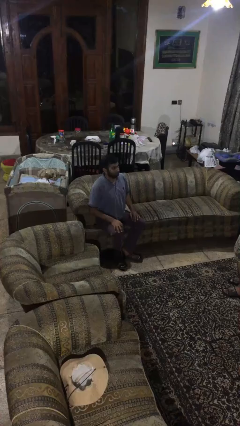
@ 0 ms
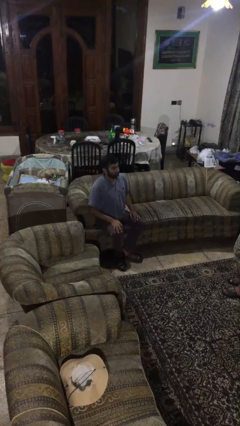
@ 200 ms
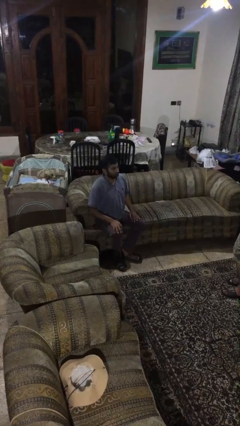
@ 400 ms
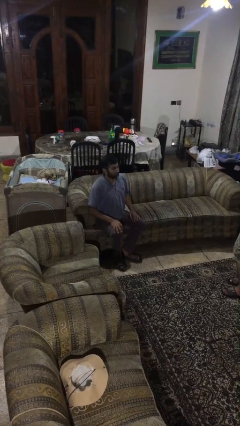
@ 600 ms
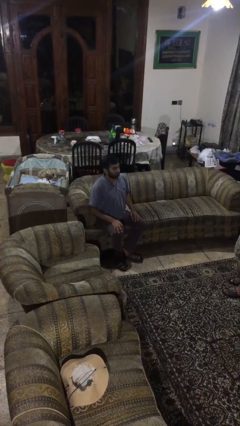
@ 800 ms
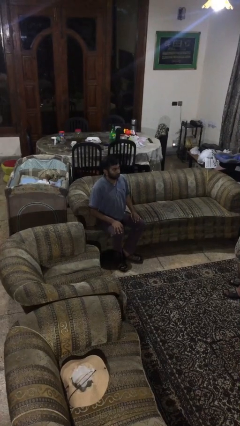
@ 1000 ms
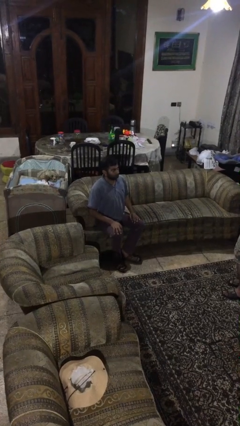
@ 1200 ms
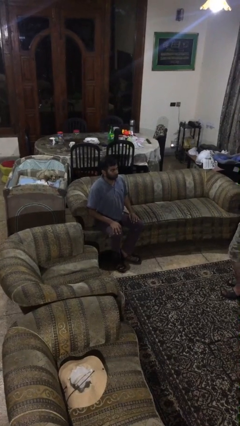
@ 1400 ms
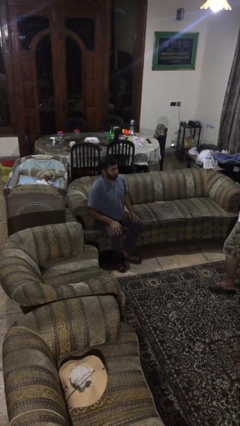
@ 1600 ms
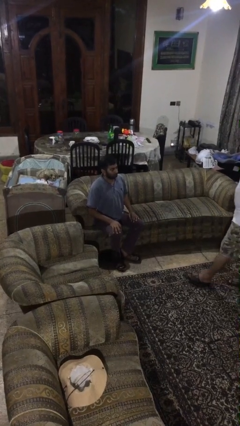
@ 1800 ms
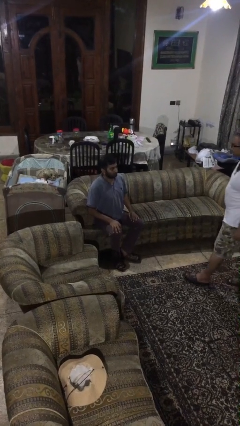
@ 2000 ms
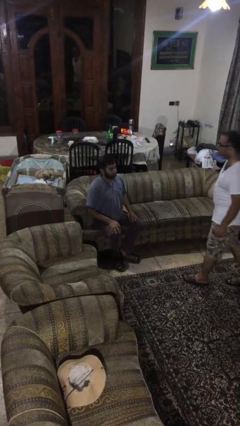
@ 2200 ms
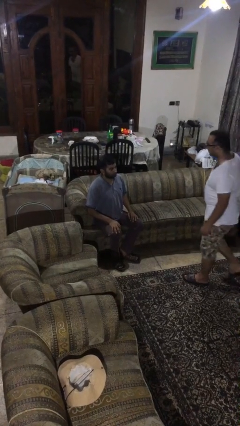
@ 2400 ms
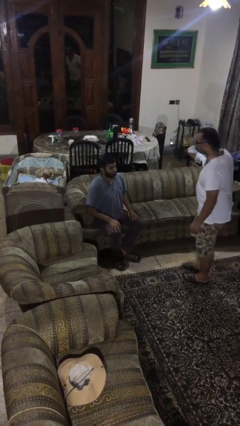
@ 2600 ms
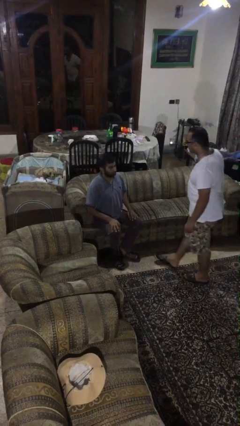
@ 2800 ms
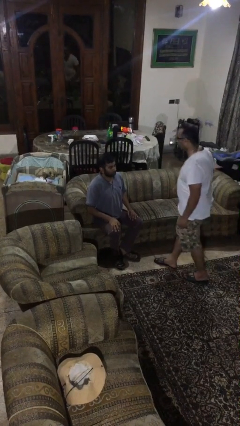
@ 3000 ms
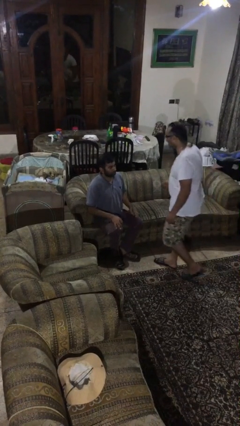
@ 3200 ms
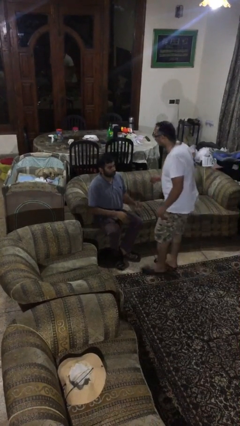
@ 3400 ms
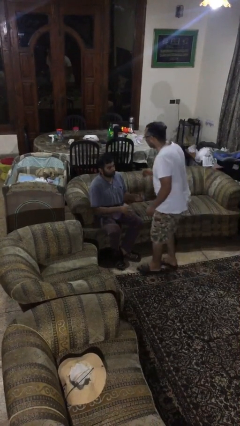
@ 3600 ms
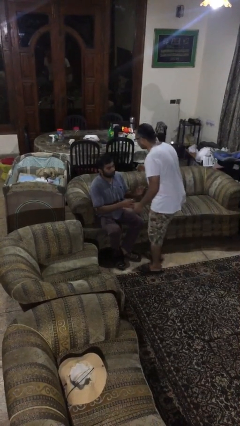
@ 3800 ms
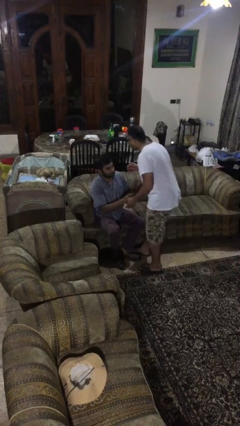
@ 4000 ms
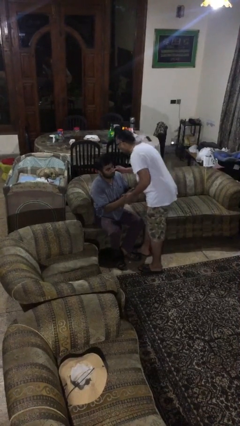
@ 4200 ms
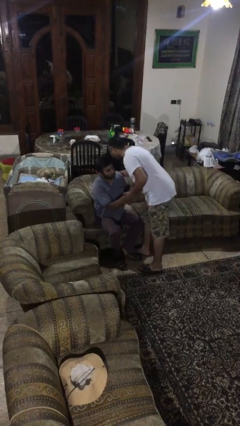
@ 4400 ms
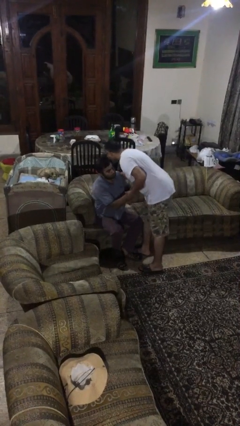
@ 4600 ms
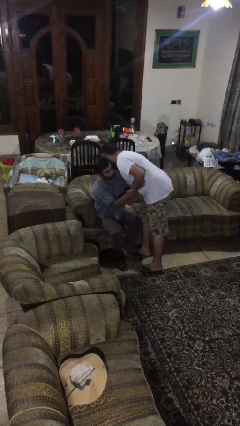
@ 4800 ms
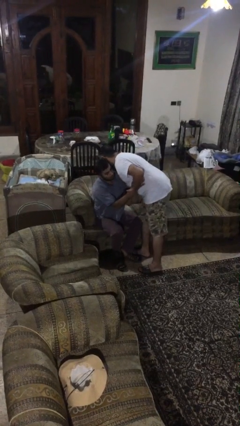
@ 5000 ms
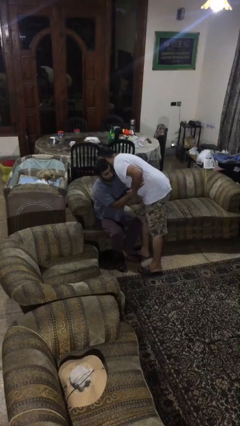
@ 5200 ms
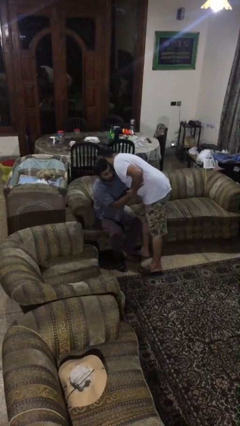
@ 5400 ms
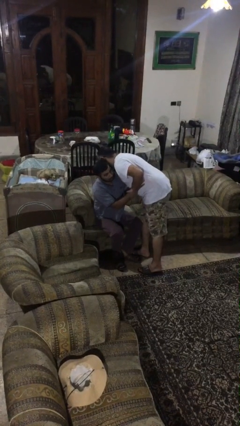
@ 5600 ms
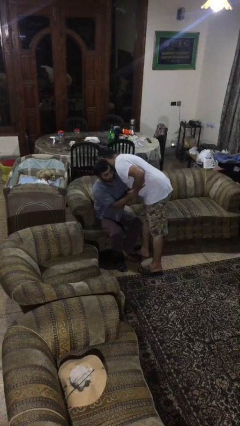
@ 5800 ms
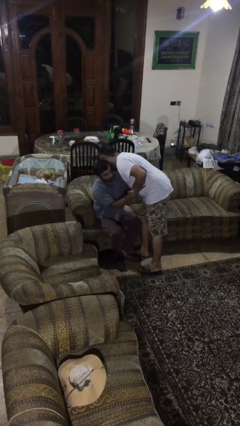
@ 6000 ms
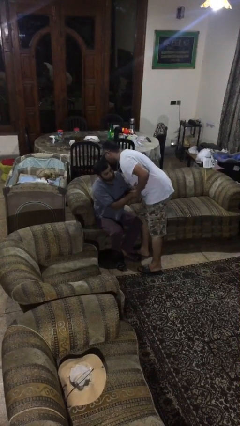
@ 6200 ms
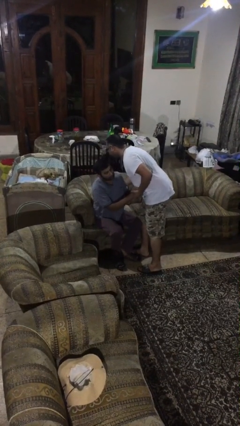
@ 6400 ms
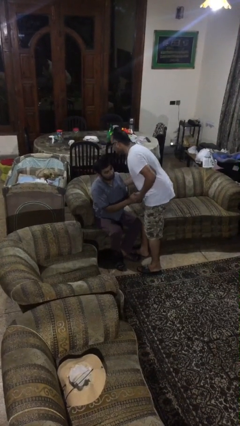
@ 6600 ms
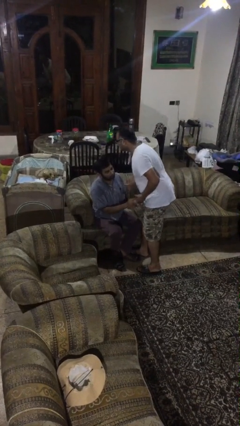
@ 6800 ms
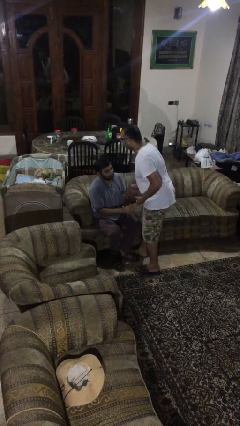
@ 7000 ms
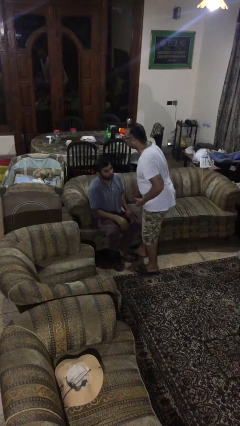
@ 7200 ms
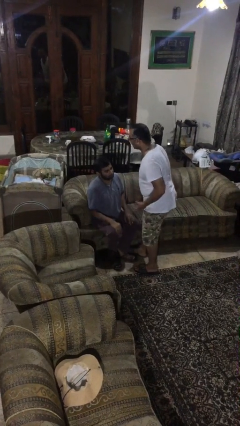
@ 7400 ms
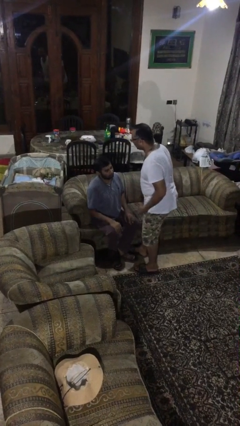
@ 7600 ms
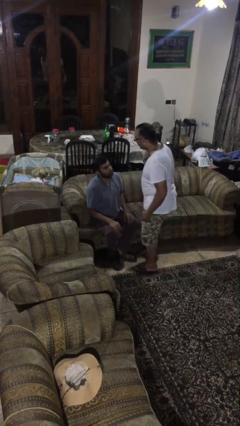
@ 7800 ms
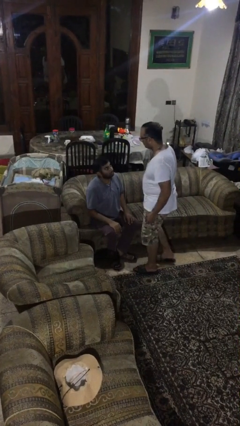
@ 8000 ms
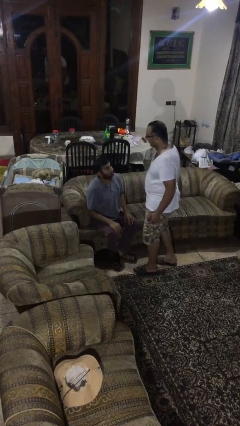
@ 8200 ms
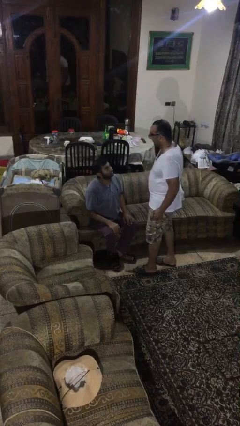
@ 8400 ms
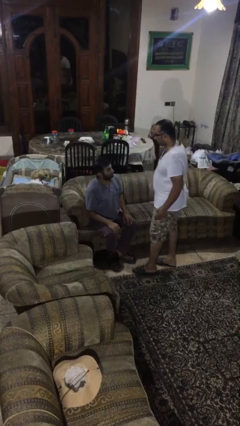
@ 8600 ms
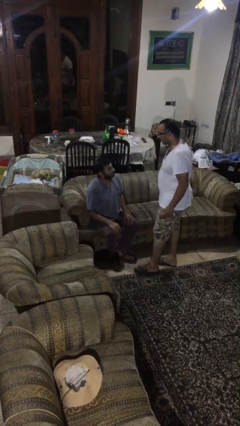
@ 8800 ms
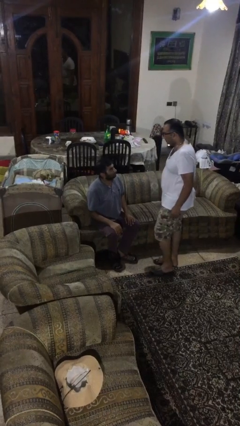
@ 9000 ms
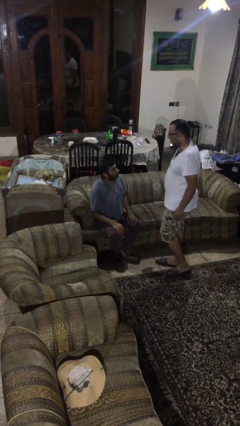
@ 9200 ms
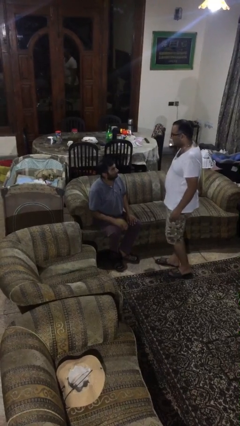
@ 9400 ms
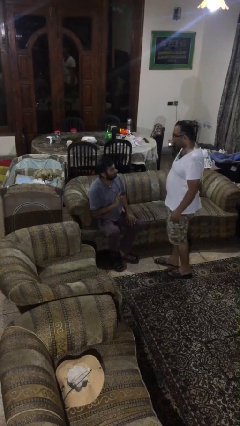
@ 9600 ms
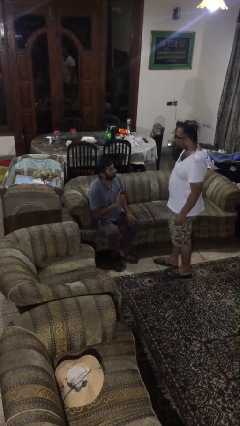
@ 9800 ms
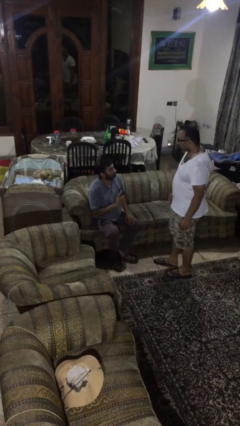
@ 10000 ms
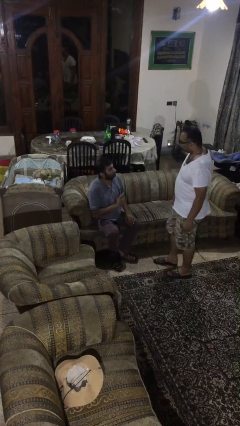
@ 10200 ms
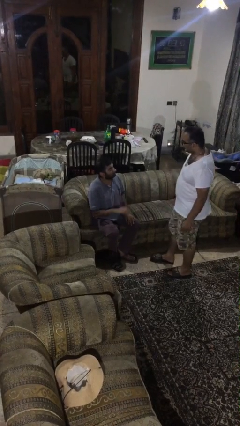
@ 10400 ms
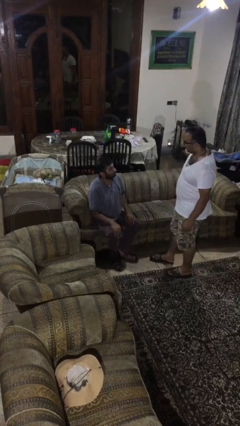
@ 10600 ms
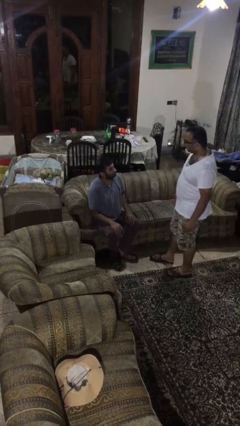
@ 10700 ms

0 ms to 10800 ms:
person embraces person

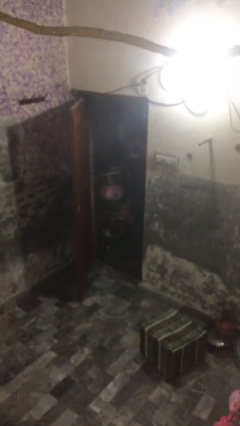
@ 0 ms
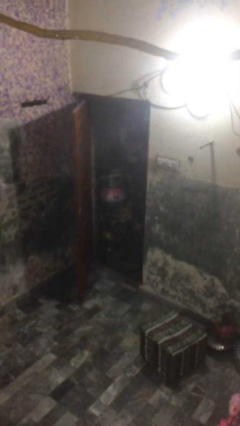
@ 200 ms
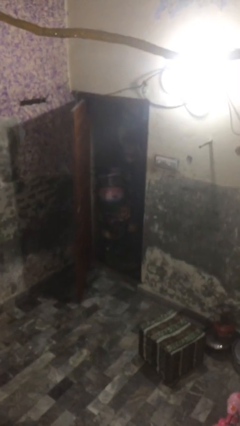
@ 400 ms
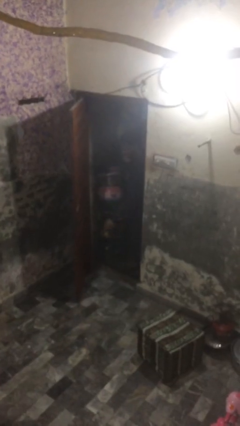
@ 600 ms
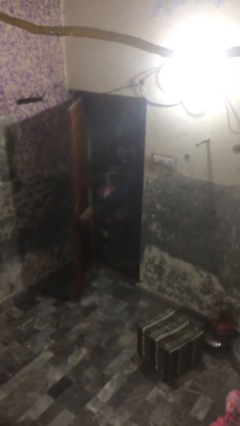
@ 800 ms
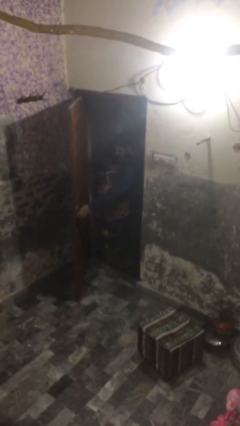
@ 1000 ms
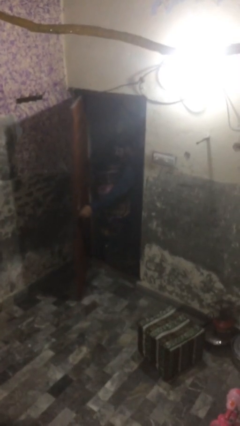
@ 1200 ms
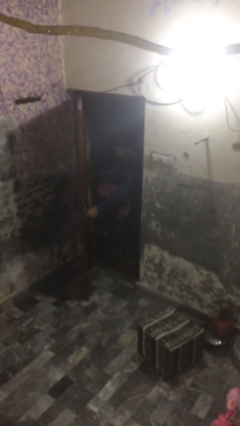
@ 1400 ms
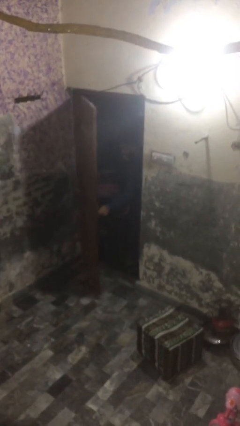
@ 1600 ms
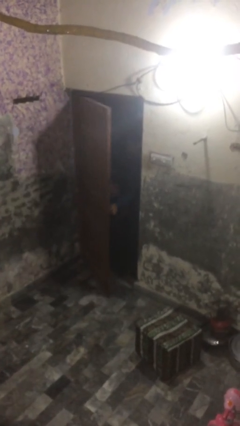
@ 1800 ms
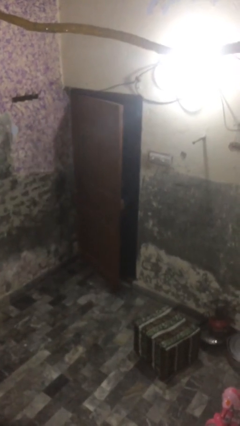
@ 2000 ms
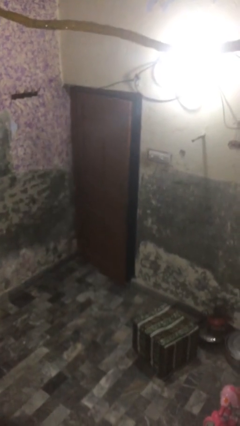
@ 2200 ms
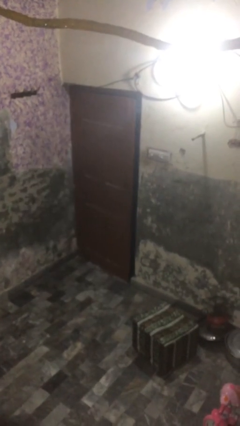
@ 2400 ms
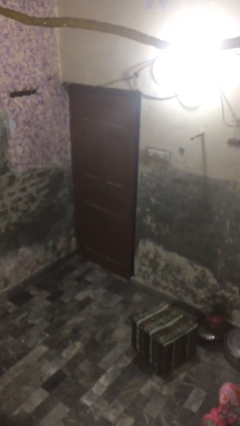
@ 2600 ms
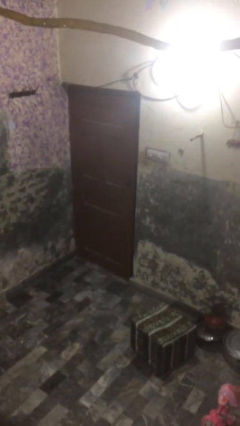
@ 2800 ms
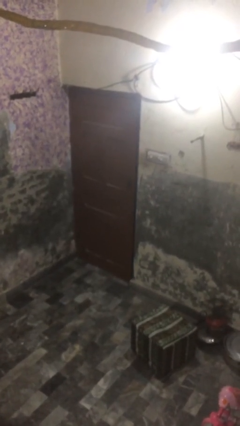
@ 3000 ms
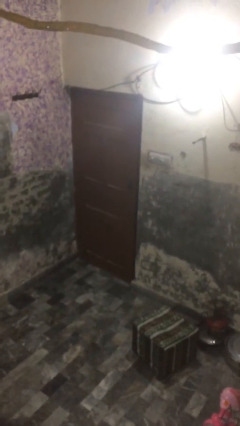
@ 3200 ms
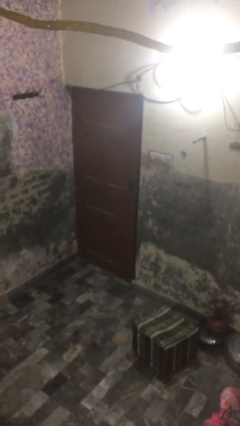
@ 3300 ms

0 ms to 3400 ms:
person closes facility door

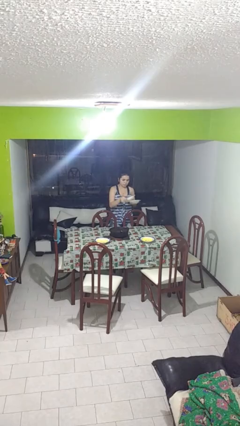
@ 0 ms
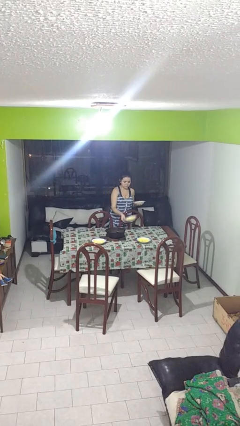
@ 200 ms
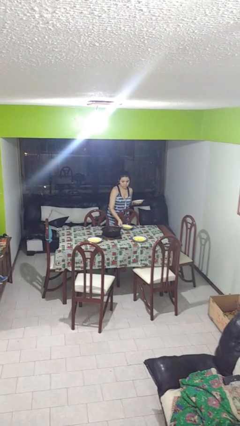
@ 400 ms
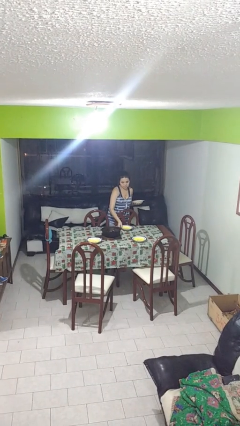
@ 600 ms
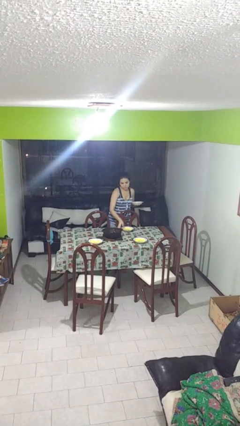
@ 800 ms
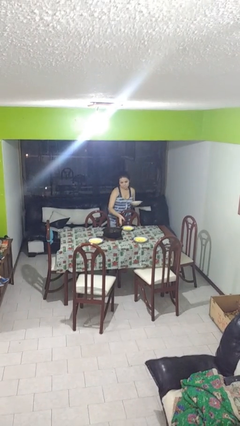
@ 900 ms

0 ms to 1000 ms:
person sets table

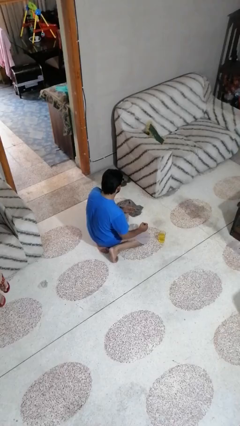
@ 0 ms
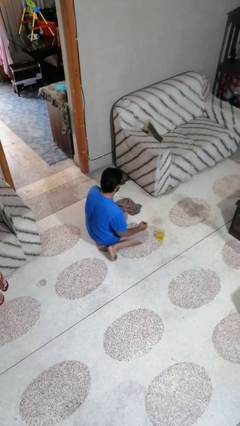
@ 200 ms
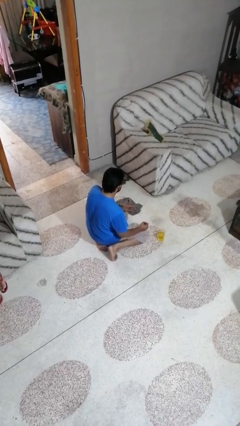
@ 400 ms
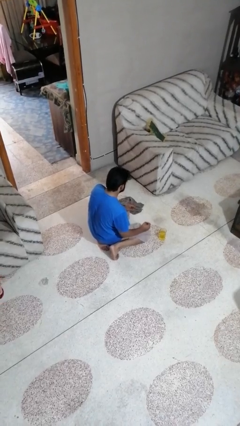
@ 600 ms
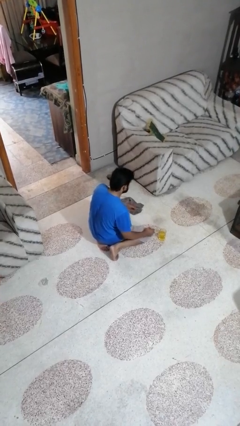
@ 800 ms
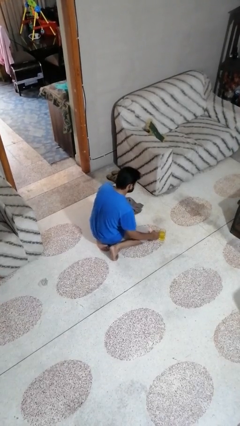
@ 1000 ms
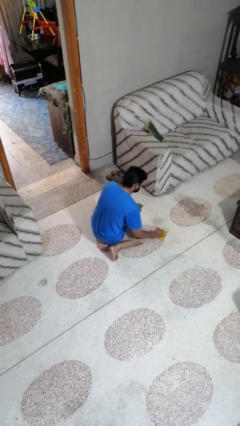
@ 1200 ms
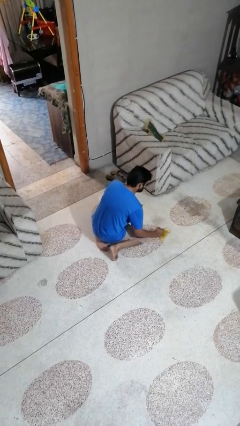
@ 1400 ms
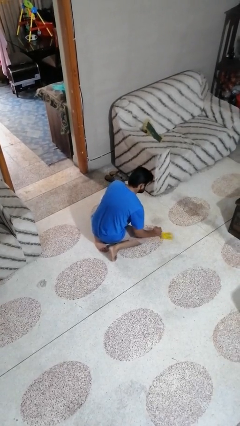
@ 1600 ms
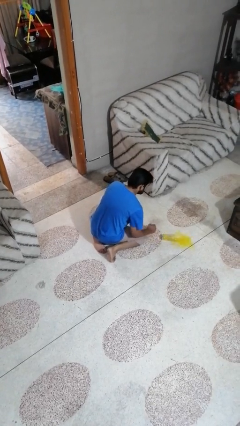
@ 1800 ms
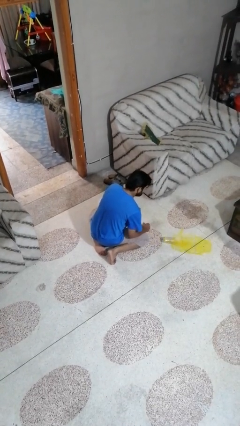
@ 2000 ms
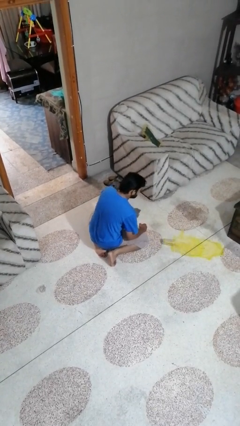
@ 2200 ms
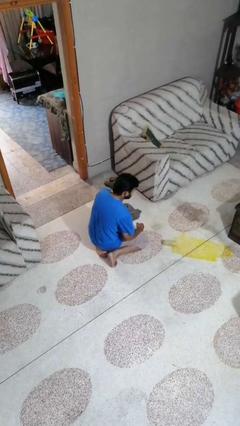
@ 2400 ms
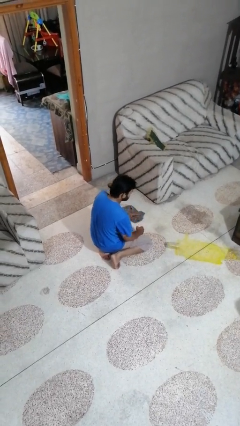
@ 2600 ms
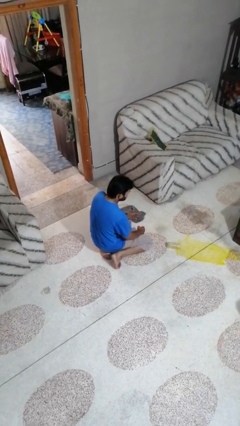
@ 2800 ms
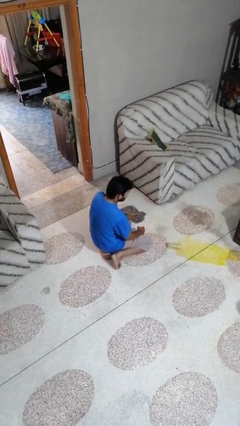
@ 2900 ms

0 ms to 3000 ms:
person spills on floor
